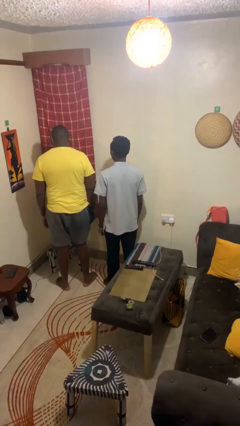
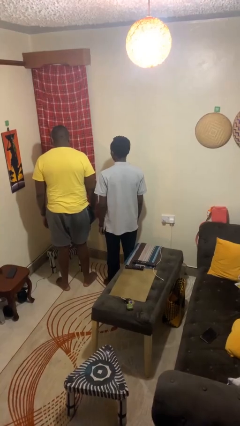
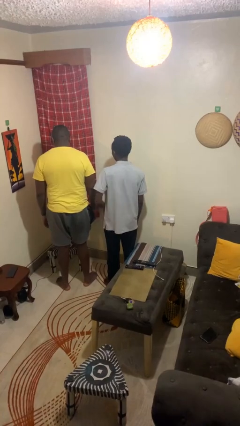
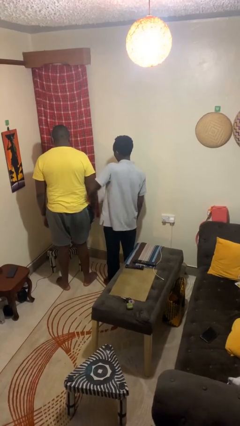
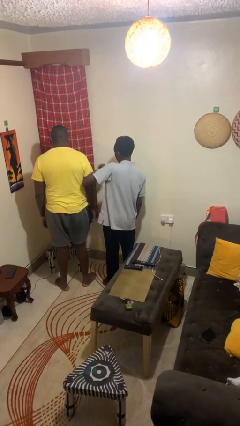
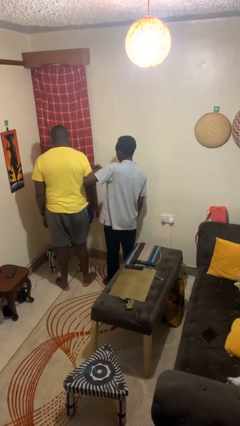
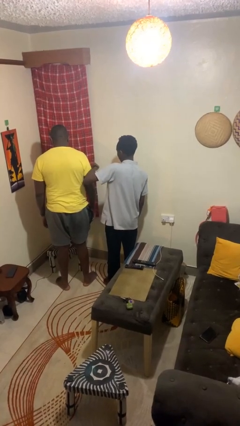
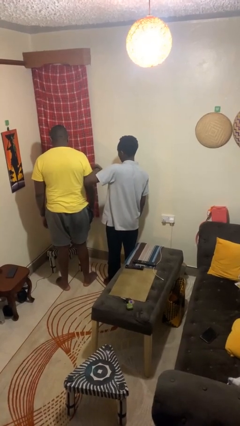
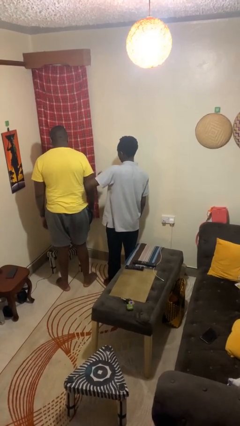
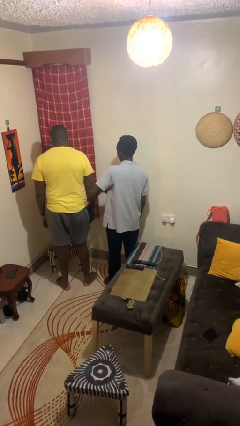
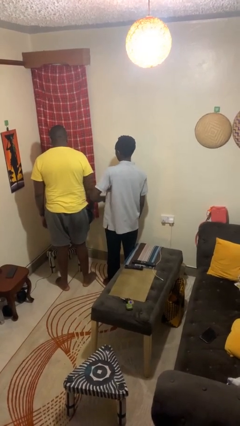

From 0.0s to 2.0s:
person nudges person with elbow

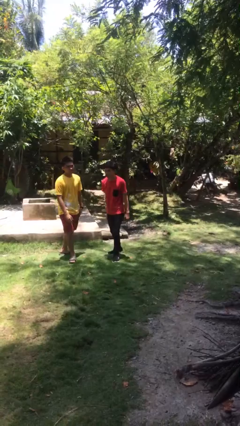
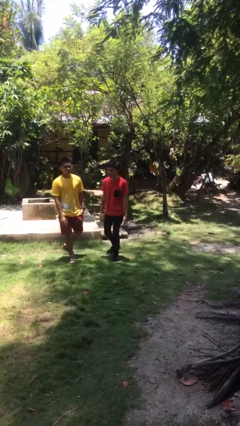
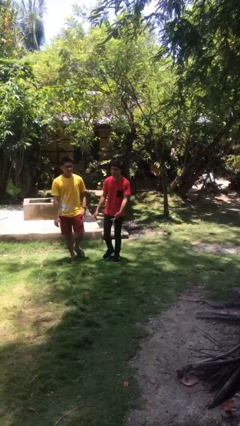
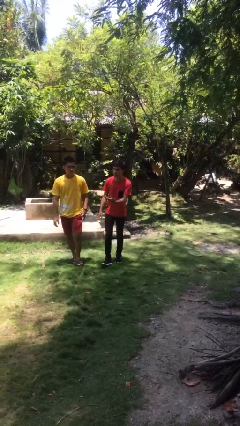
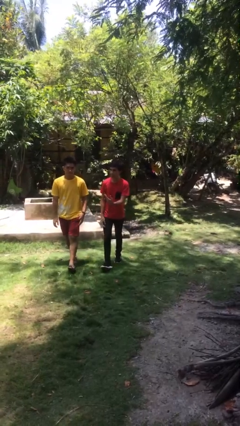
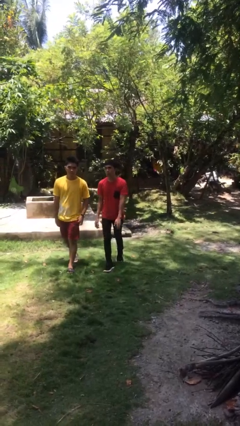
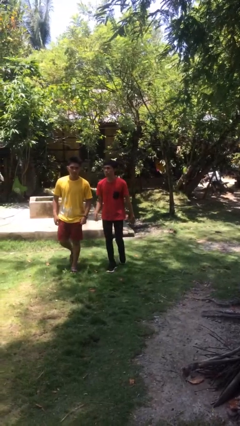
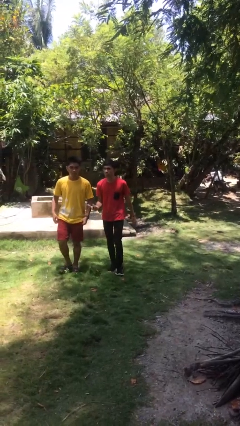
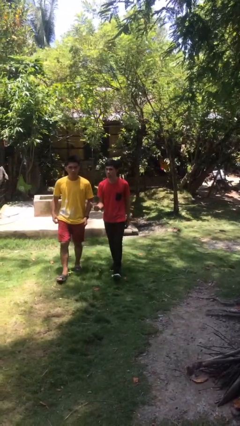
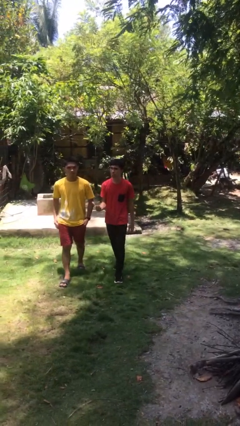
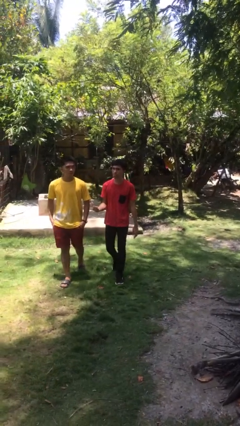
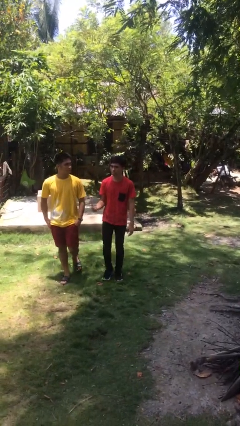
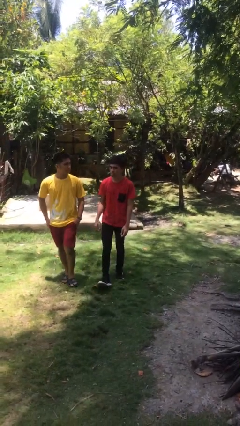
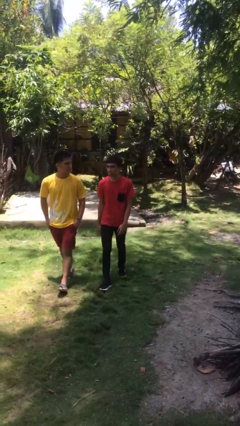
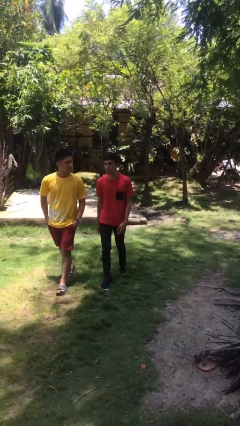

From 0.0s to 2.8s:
person talks to person

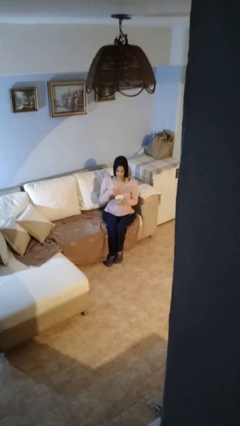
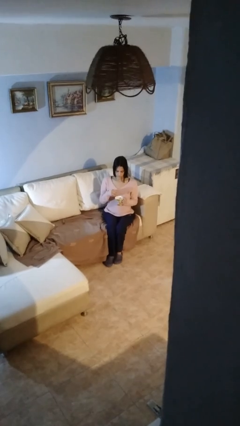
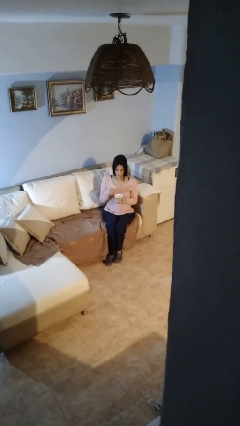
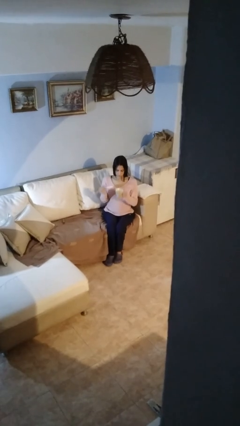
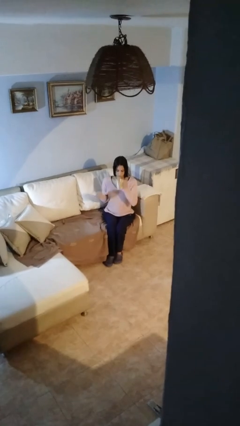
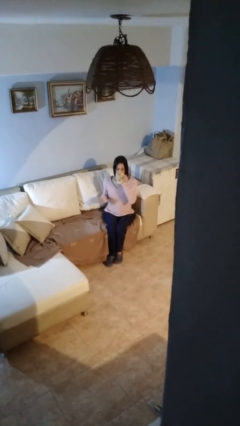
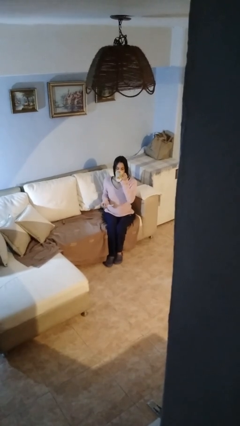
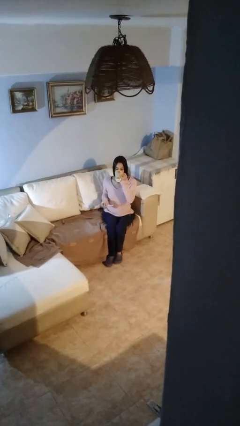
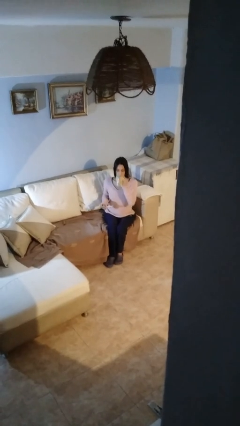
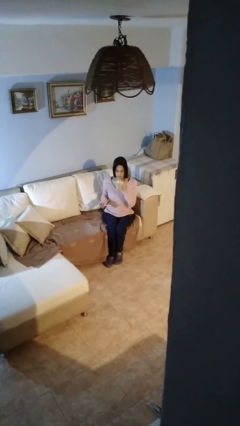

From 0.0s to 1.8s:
person drinks from mug

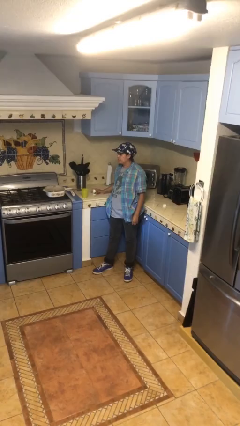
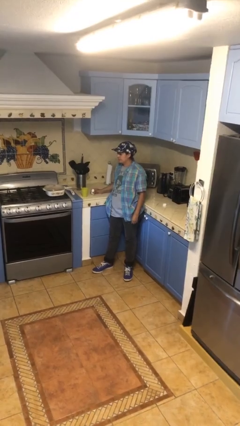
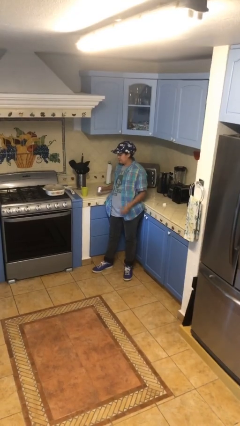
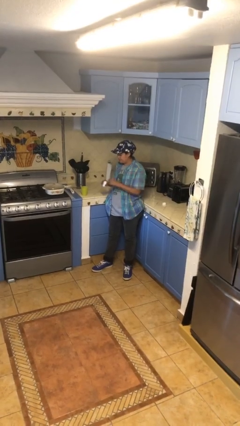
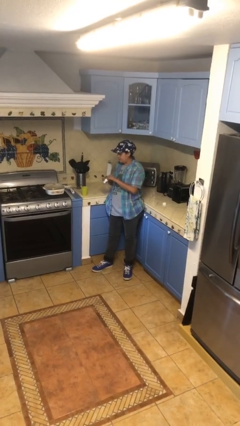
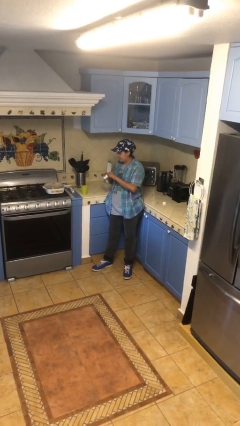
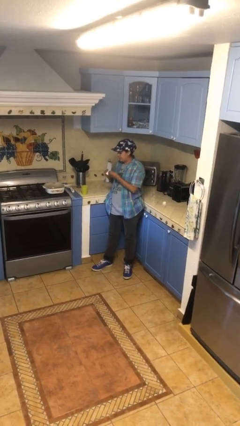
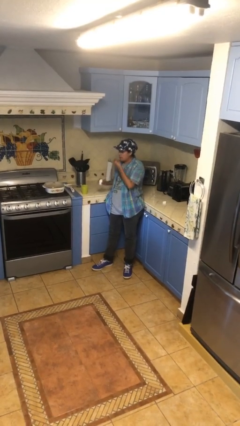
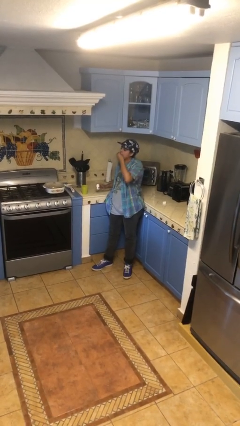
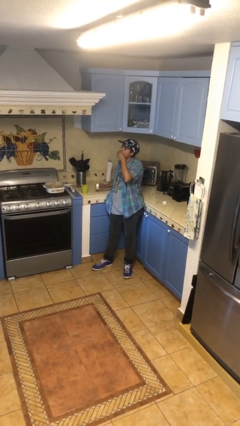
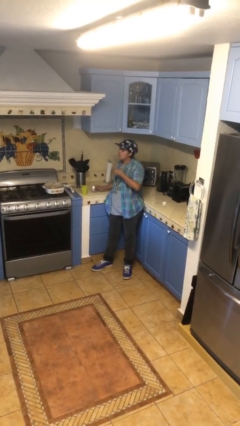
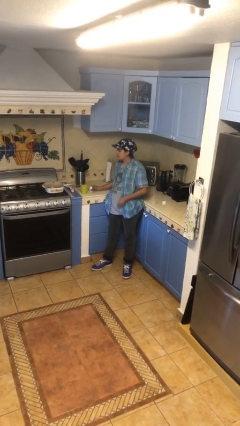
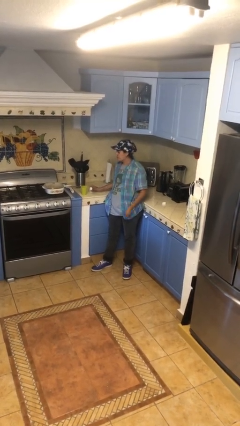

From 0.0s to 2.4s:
person takes medicine pills

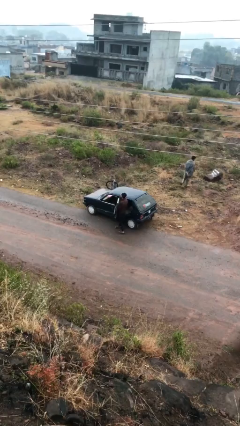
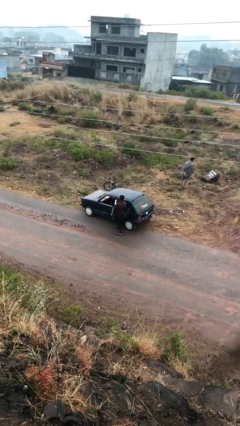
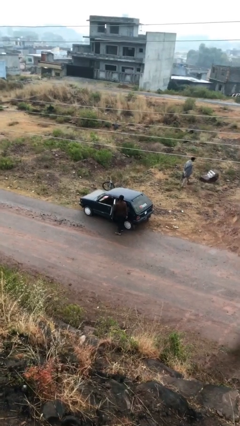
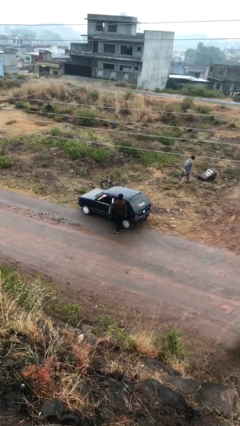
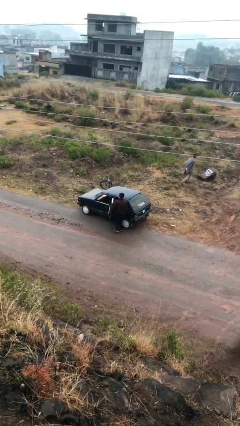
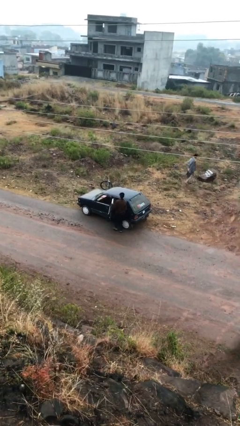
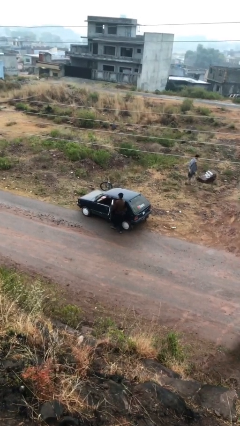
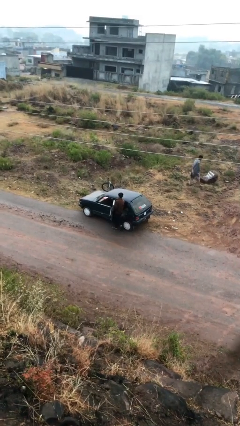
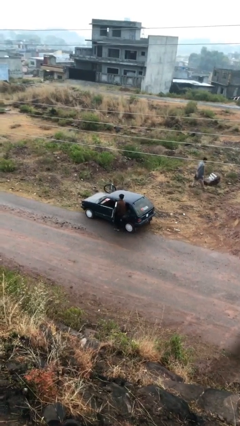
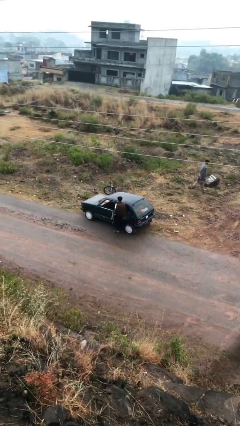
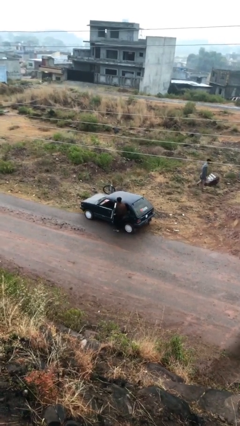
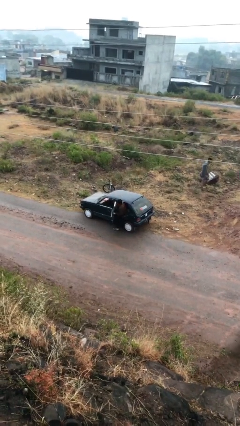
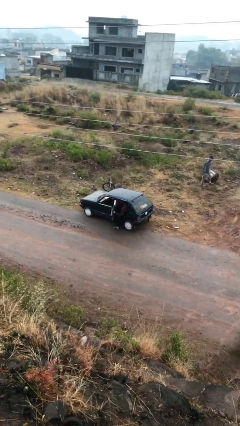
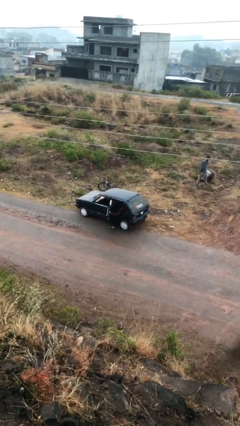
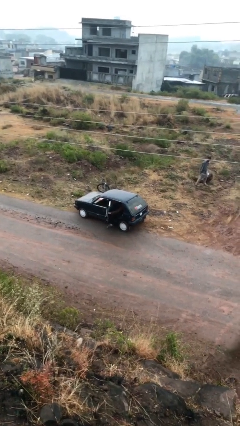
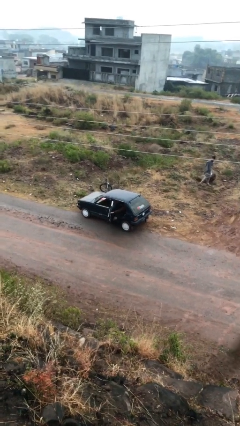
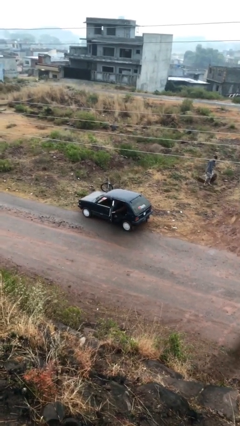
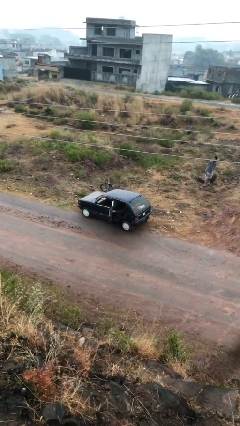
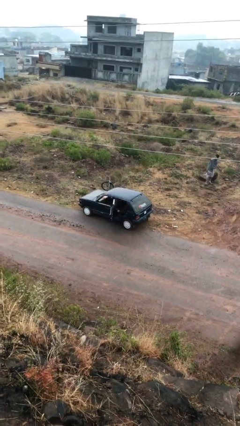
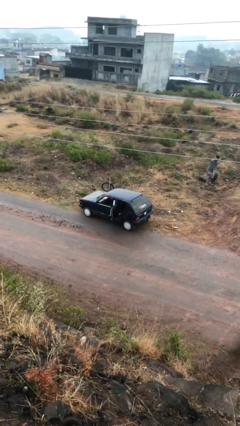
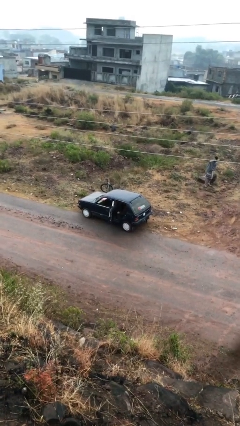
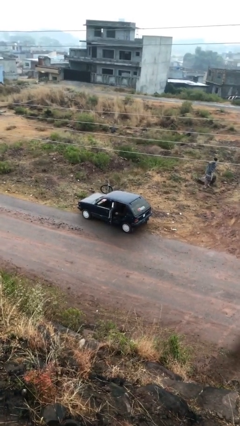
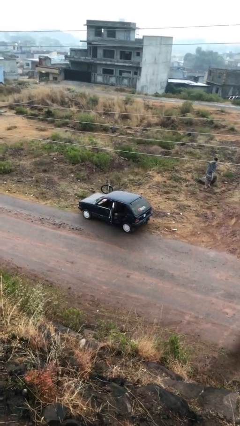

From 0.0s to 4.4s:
person enters car

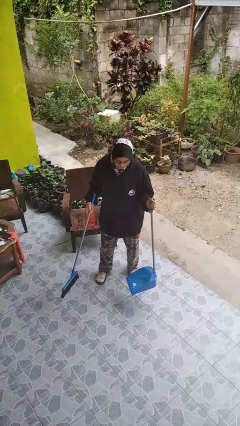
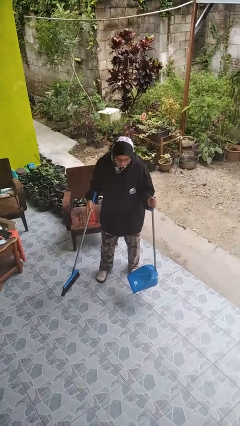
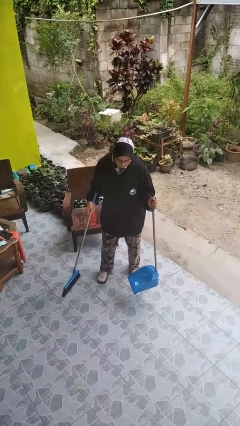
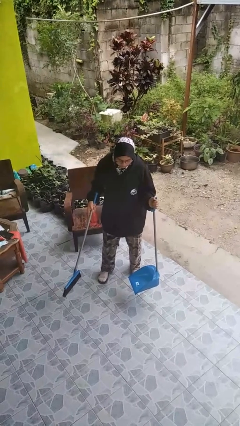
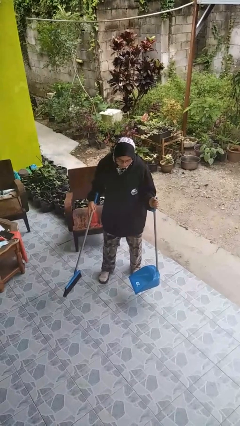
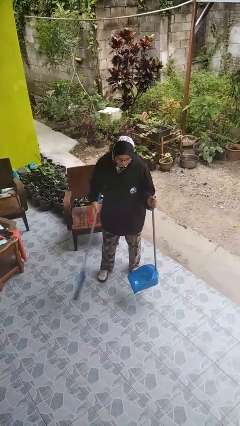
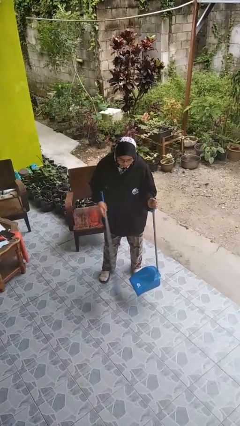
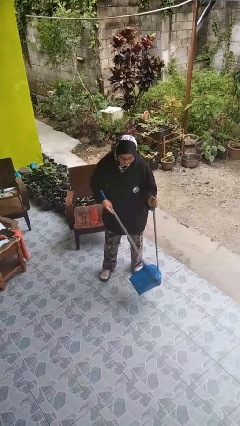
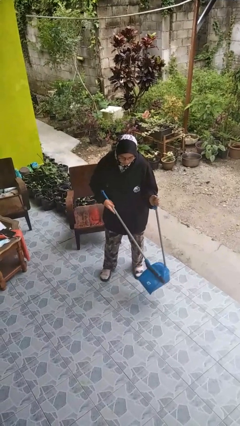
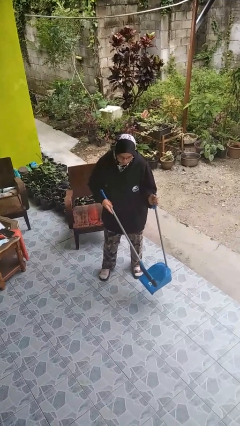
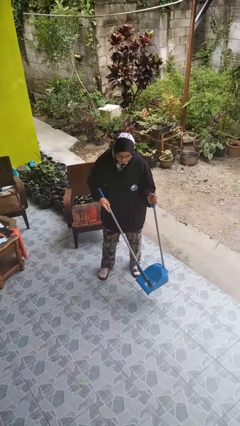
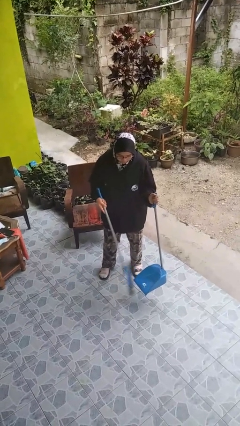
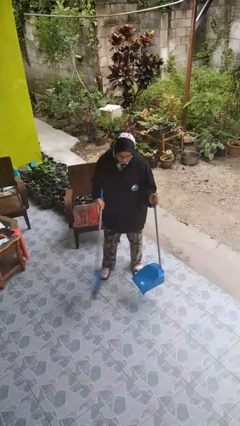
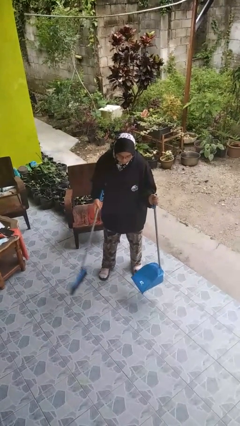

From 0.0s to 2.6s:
person sweeps floor

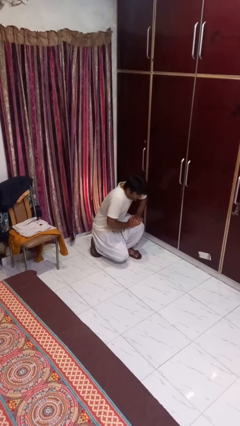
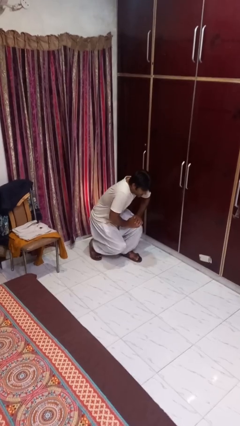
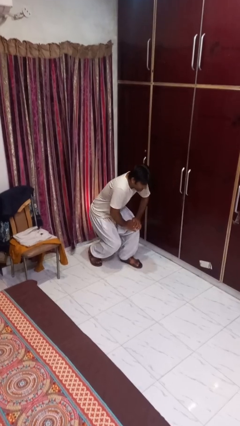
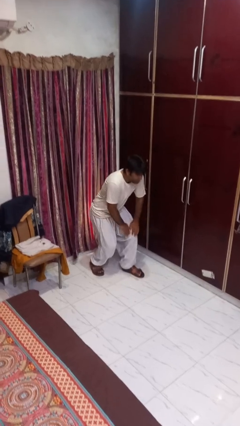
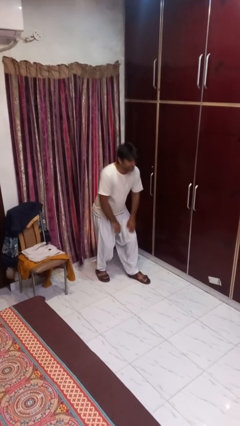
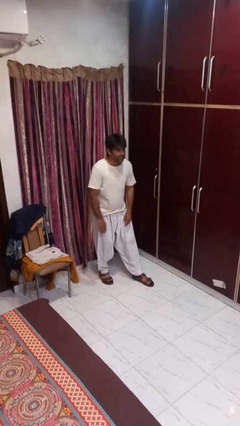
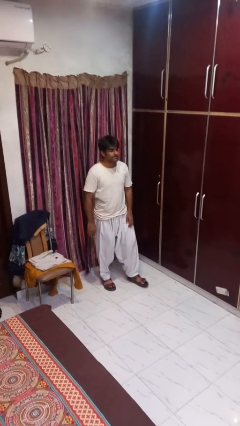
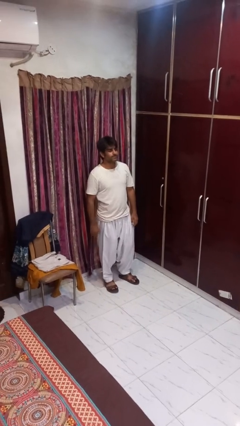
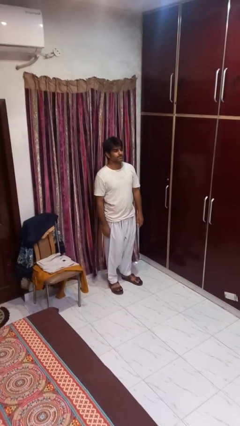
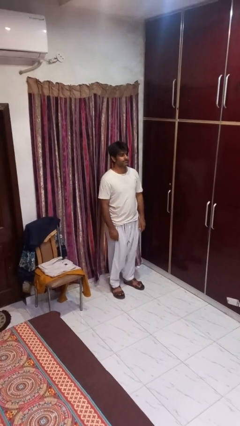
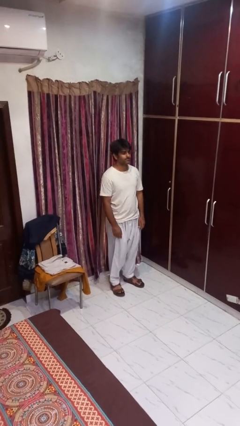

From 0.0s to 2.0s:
person stands up from floor
